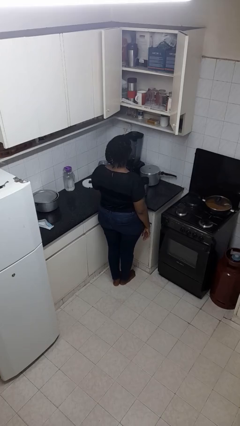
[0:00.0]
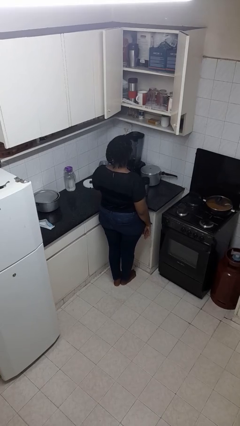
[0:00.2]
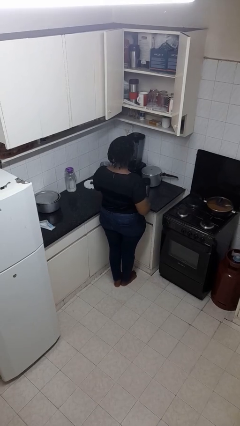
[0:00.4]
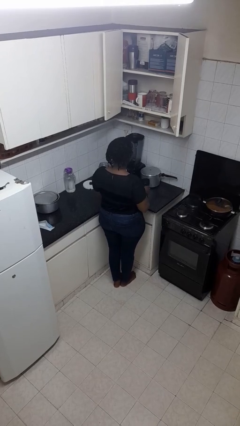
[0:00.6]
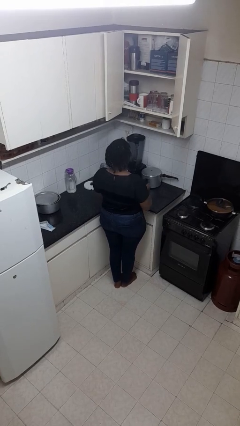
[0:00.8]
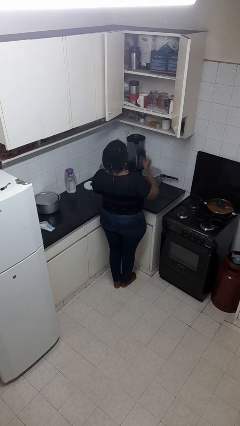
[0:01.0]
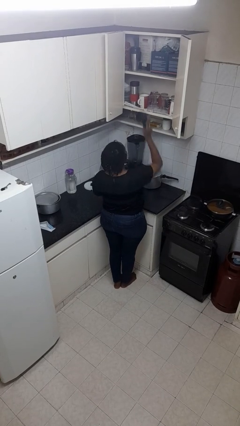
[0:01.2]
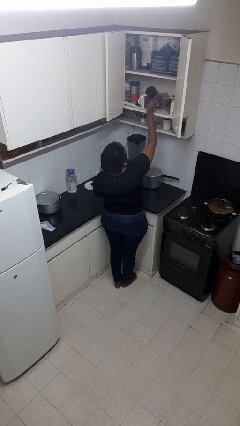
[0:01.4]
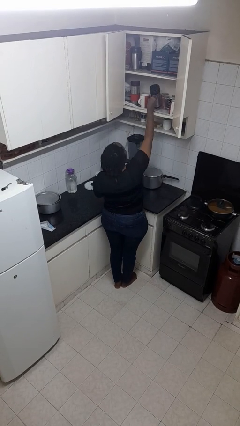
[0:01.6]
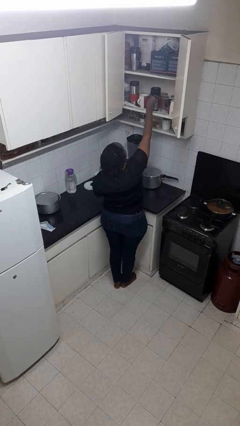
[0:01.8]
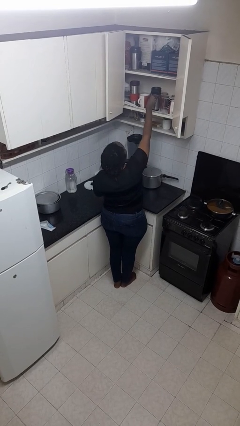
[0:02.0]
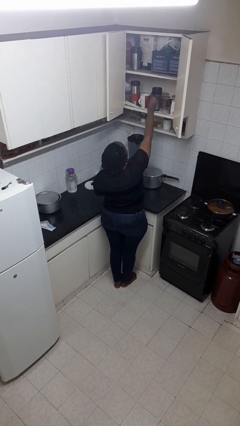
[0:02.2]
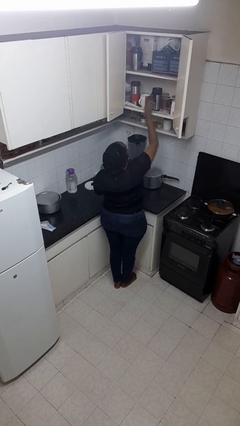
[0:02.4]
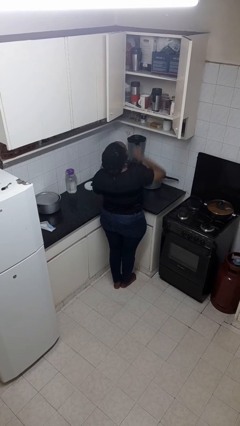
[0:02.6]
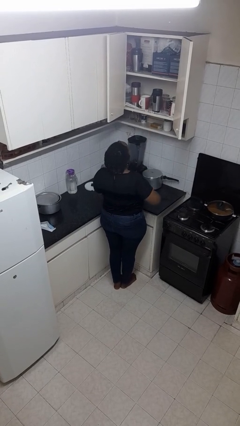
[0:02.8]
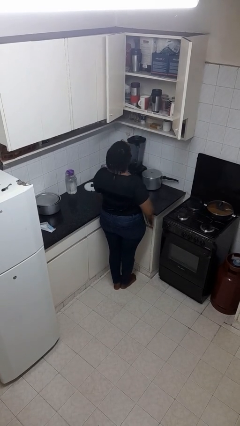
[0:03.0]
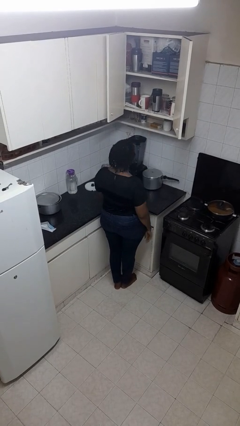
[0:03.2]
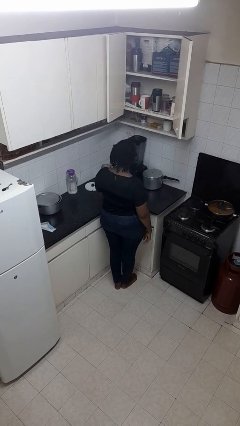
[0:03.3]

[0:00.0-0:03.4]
person puts object in cabinet

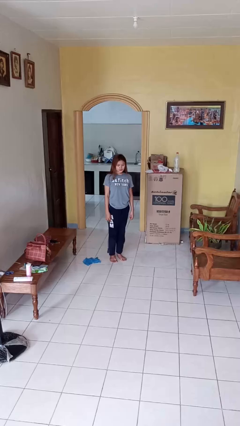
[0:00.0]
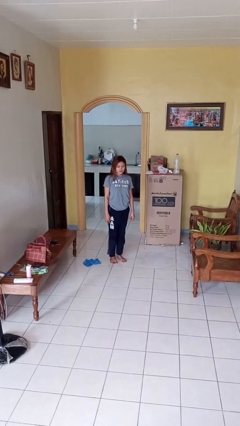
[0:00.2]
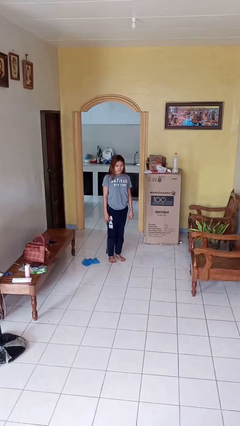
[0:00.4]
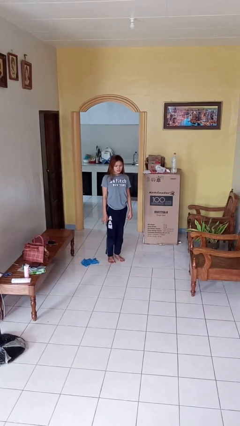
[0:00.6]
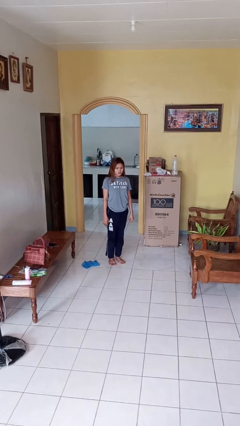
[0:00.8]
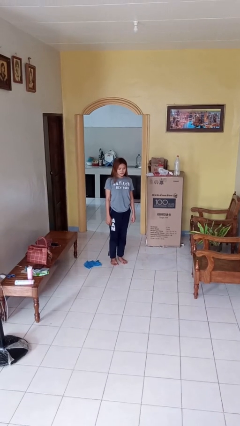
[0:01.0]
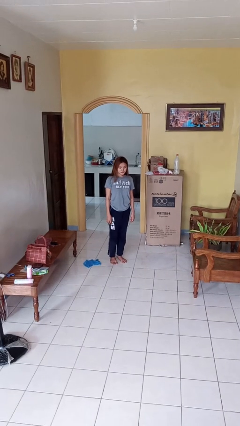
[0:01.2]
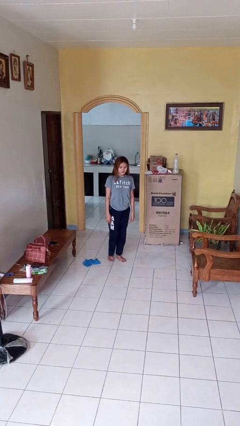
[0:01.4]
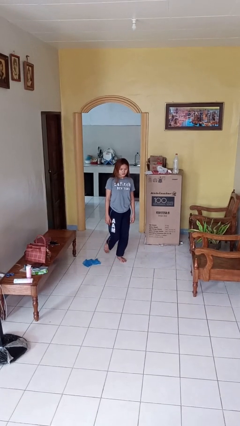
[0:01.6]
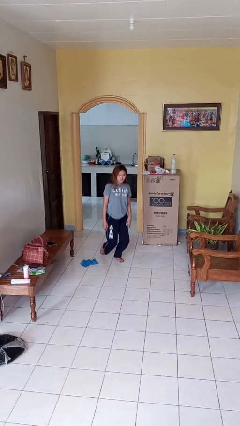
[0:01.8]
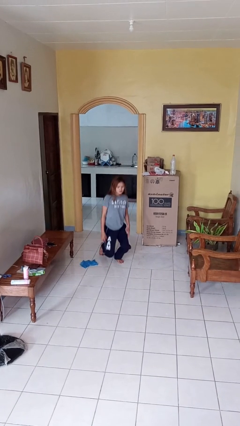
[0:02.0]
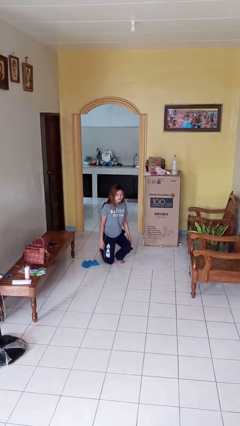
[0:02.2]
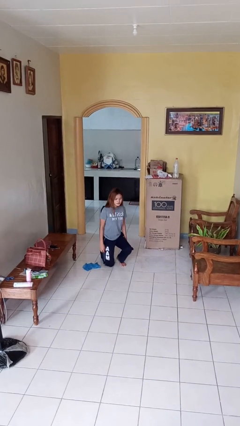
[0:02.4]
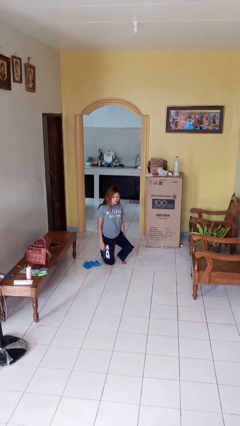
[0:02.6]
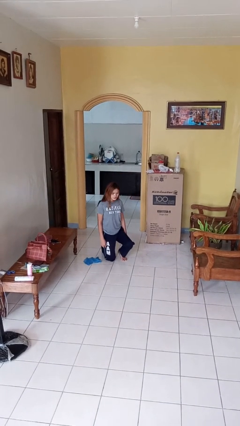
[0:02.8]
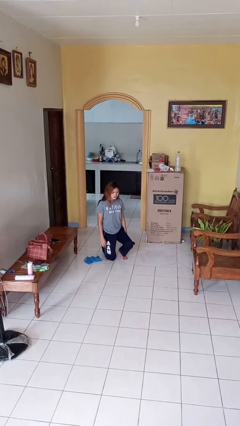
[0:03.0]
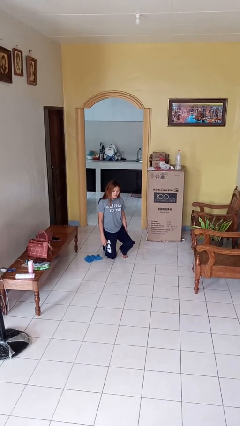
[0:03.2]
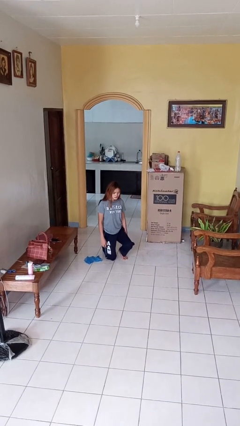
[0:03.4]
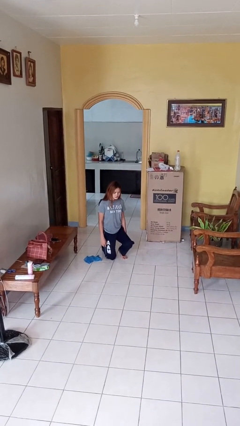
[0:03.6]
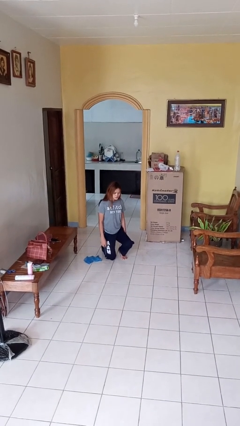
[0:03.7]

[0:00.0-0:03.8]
person kneels

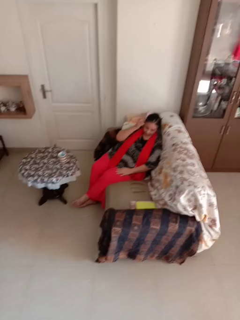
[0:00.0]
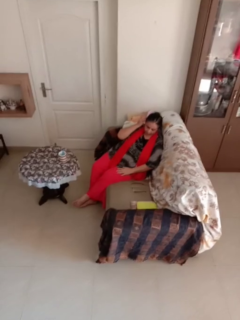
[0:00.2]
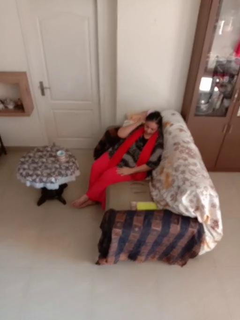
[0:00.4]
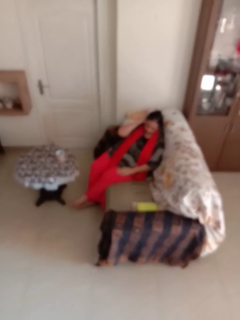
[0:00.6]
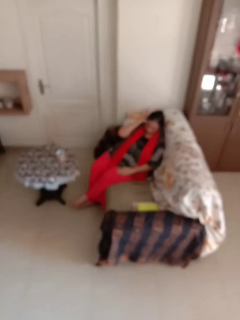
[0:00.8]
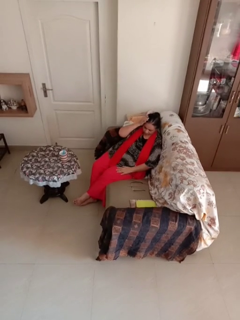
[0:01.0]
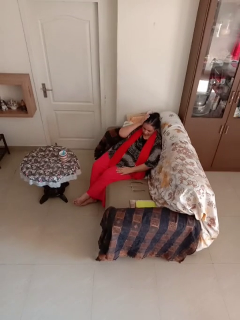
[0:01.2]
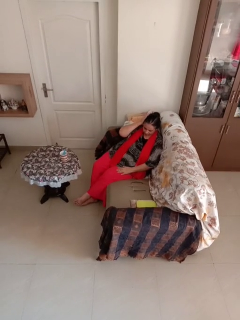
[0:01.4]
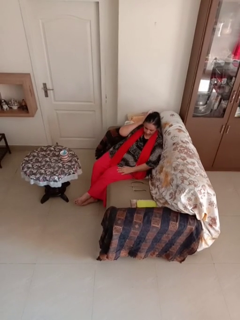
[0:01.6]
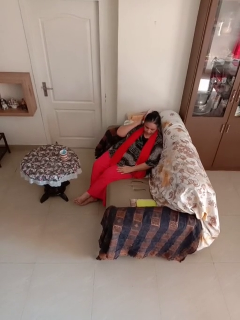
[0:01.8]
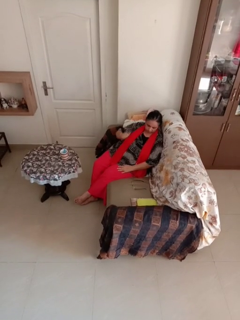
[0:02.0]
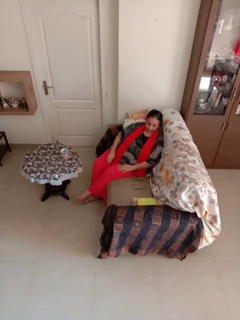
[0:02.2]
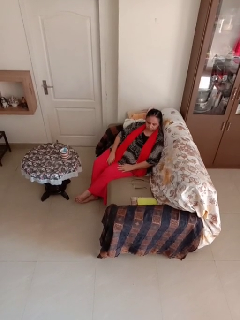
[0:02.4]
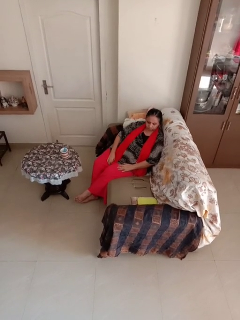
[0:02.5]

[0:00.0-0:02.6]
person strokes hair

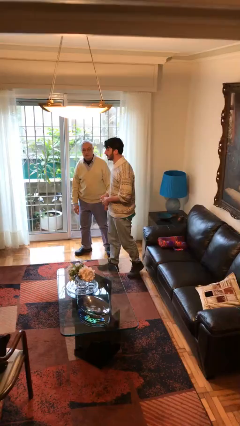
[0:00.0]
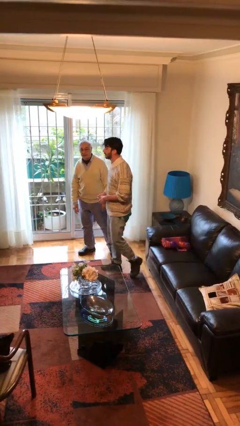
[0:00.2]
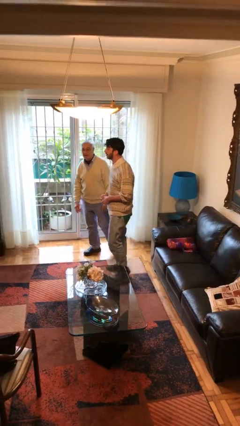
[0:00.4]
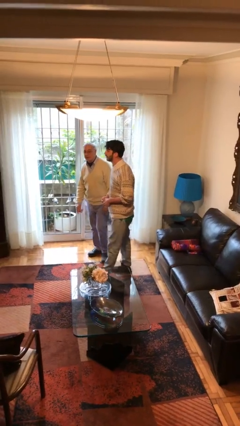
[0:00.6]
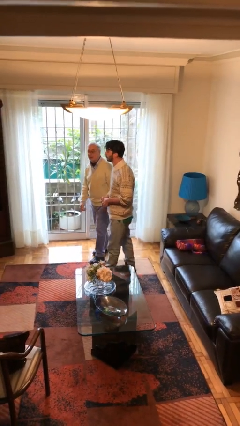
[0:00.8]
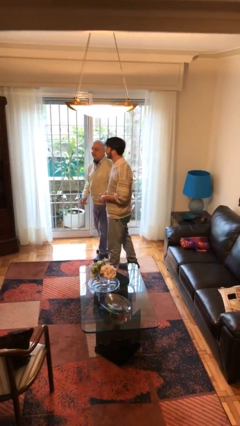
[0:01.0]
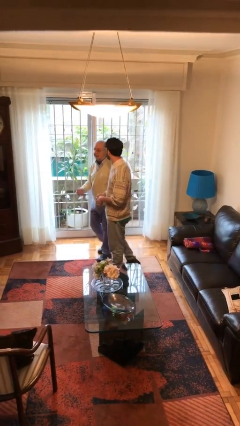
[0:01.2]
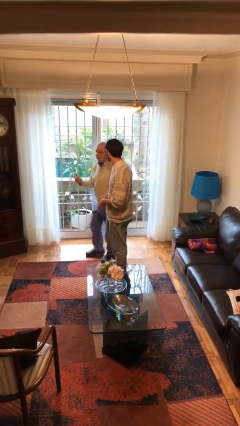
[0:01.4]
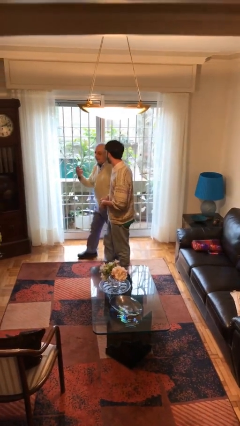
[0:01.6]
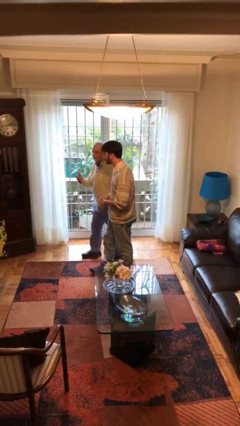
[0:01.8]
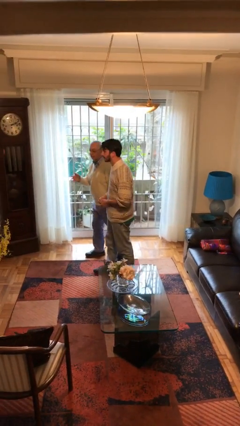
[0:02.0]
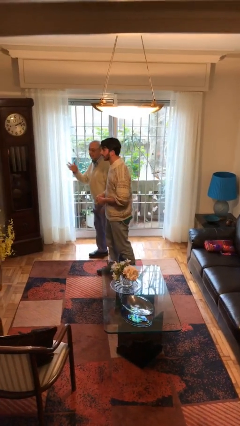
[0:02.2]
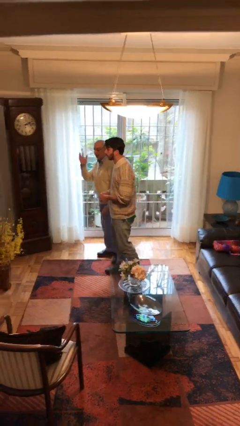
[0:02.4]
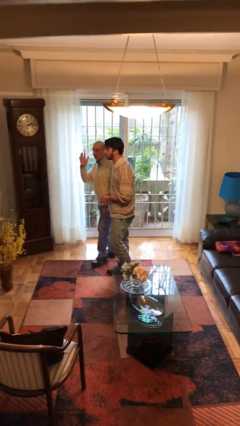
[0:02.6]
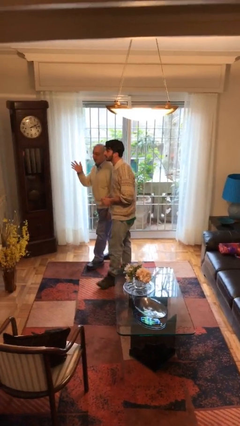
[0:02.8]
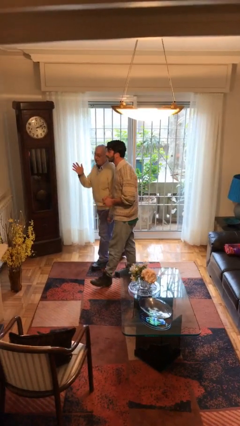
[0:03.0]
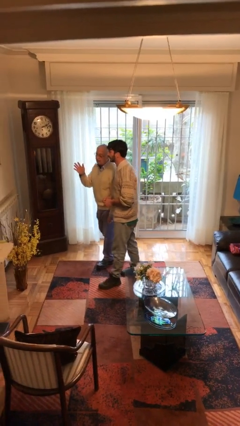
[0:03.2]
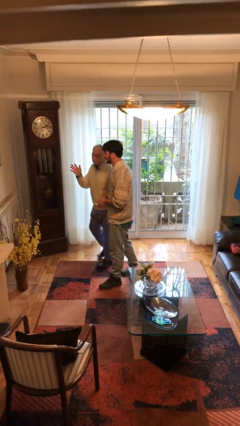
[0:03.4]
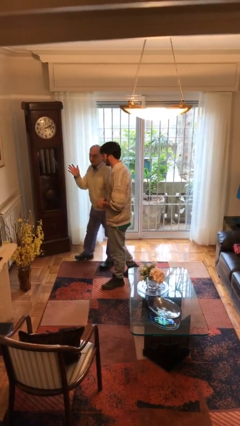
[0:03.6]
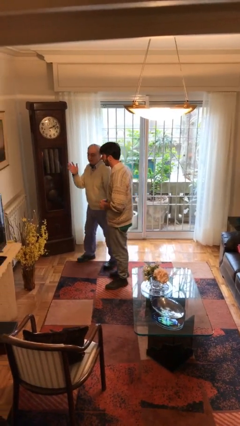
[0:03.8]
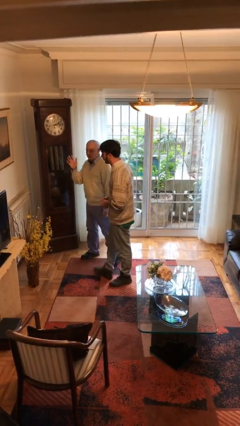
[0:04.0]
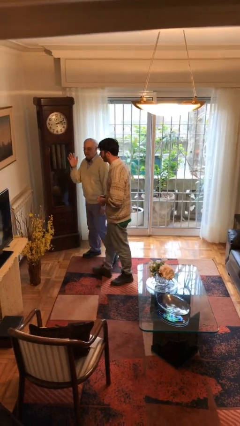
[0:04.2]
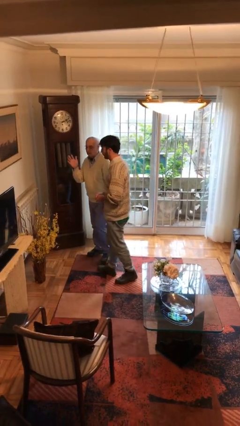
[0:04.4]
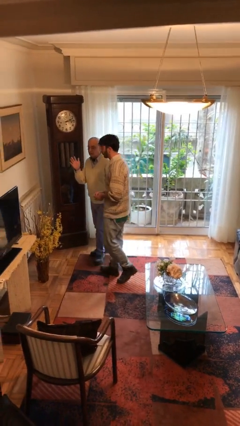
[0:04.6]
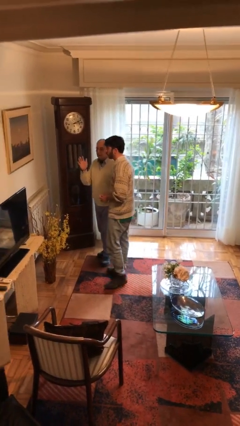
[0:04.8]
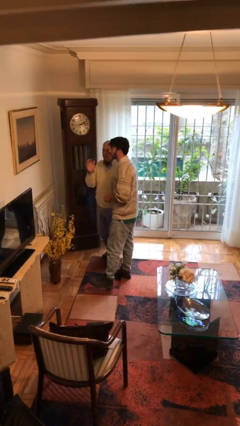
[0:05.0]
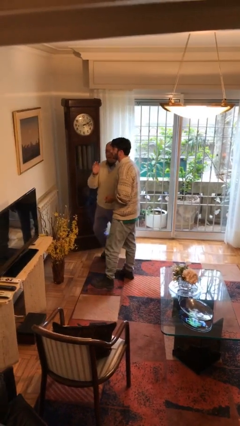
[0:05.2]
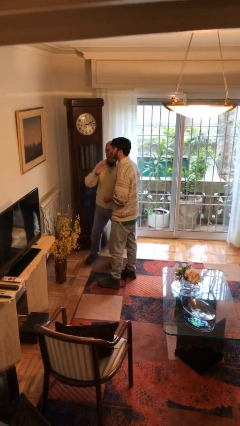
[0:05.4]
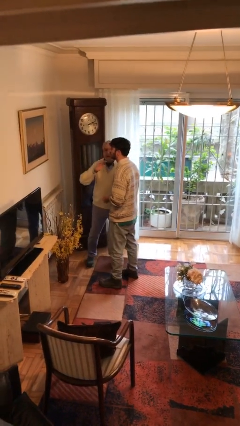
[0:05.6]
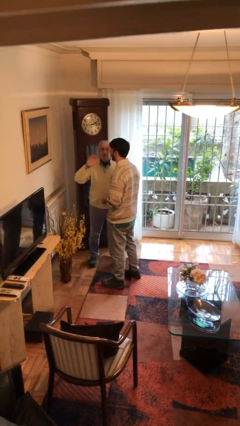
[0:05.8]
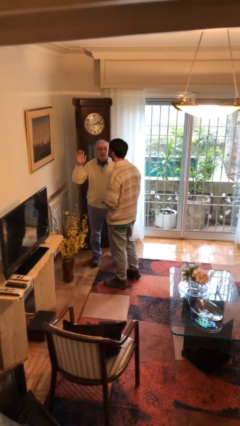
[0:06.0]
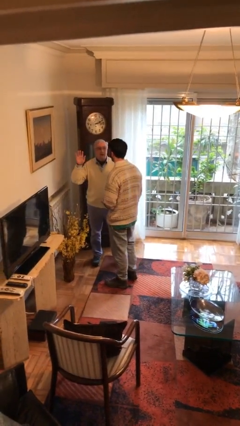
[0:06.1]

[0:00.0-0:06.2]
person talks to person

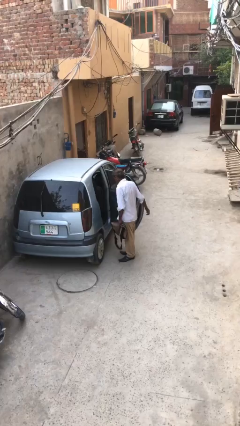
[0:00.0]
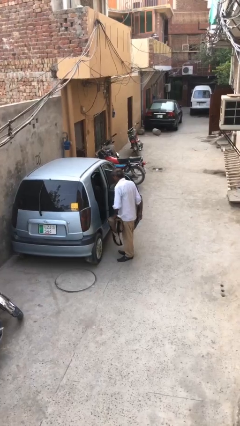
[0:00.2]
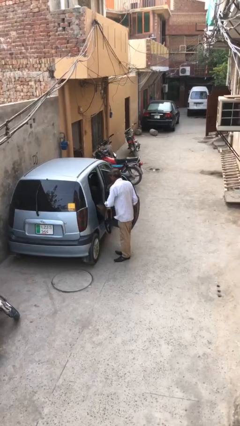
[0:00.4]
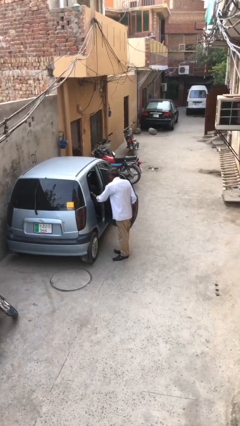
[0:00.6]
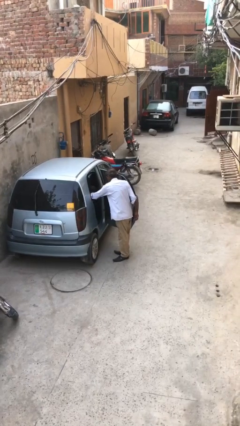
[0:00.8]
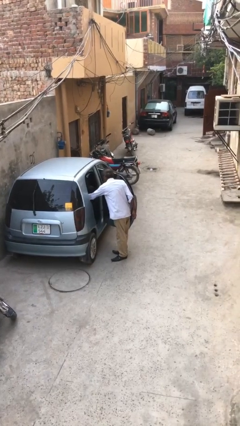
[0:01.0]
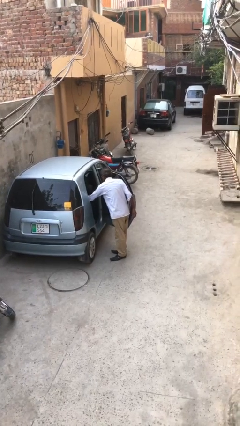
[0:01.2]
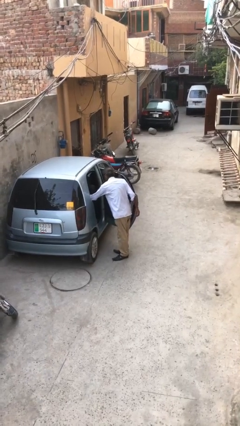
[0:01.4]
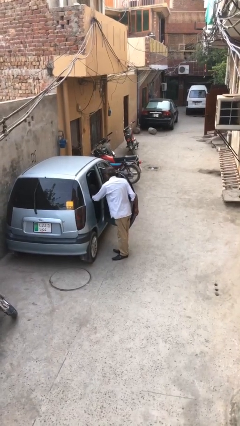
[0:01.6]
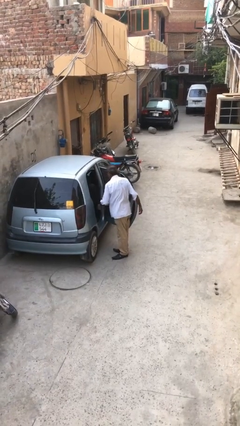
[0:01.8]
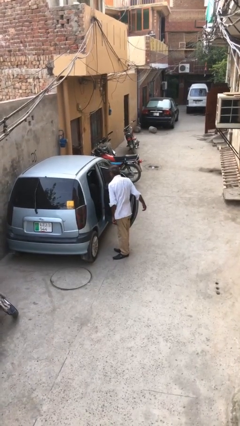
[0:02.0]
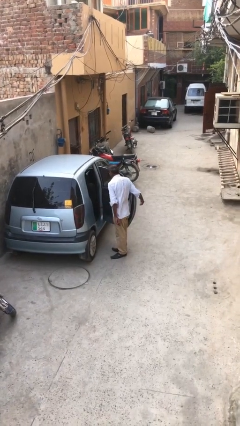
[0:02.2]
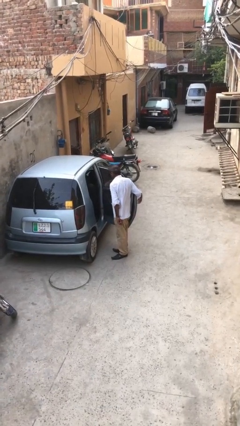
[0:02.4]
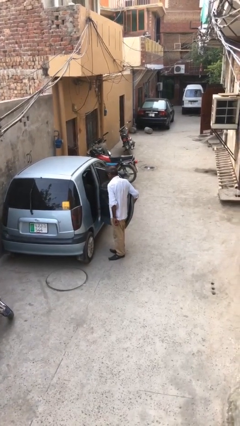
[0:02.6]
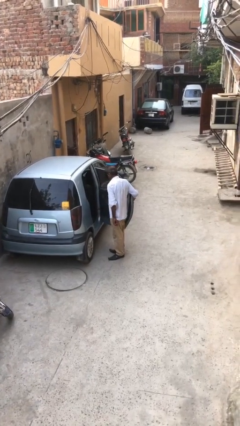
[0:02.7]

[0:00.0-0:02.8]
person loads car
